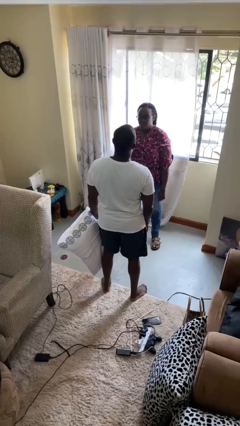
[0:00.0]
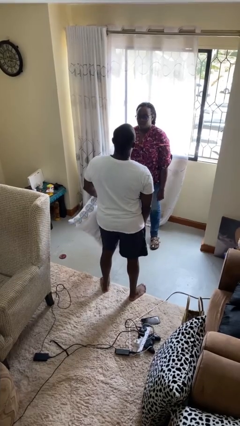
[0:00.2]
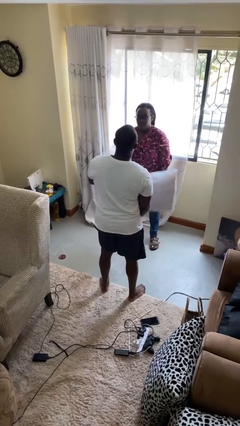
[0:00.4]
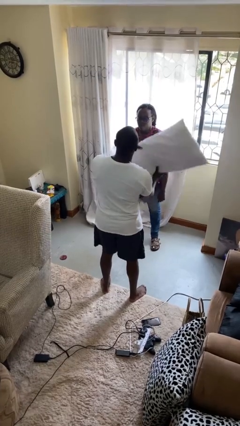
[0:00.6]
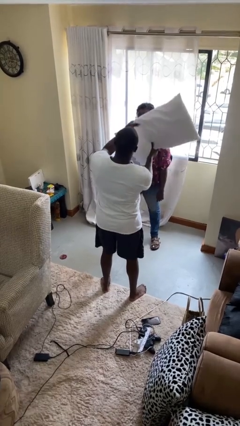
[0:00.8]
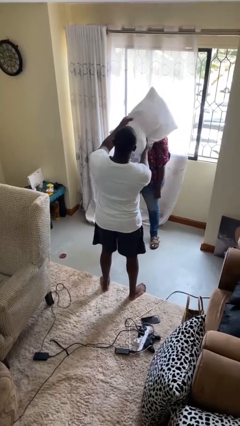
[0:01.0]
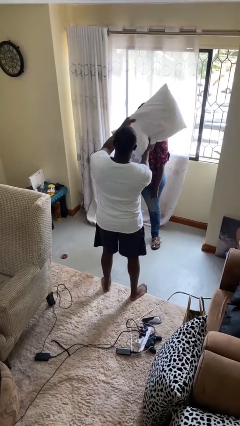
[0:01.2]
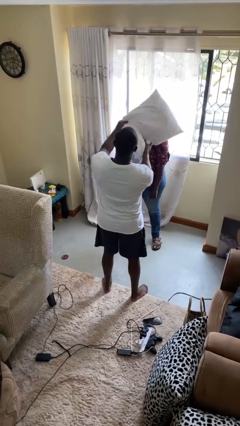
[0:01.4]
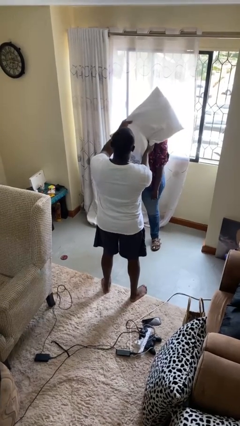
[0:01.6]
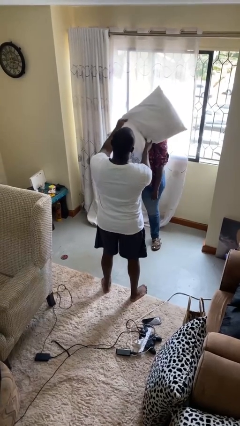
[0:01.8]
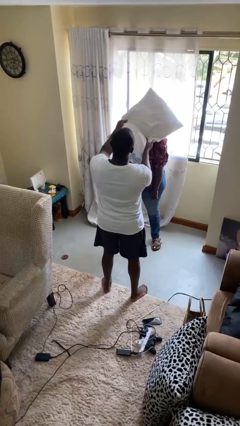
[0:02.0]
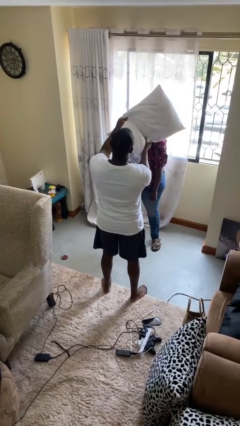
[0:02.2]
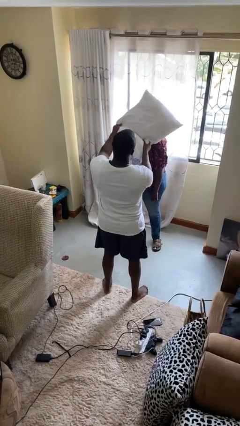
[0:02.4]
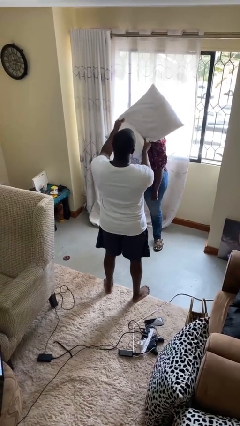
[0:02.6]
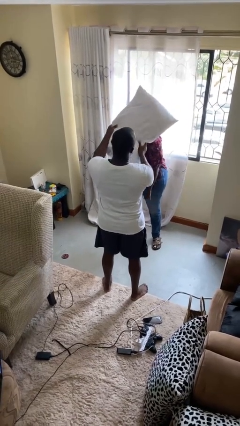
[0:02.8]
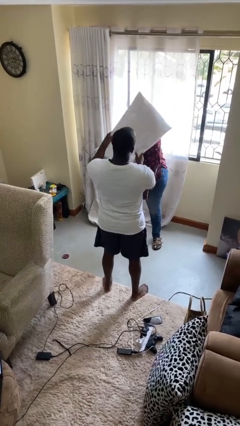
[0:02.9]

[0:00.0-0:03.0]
person hits person with pillow

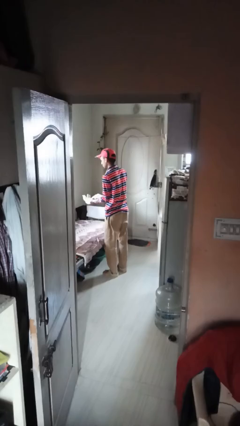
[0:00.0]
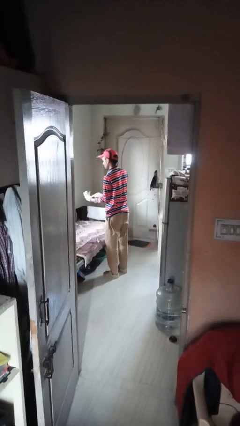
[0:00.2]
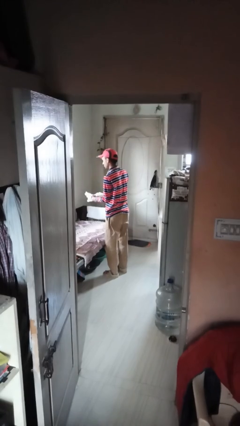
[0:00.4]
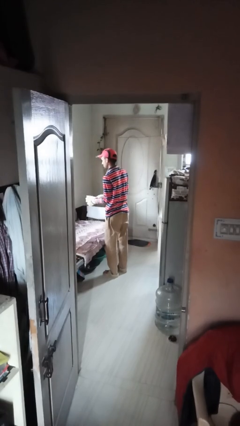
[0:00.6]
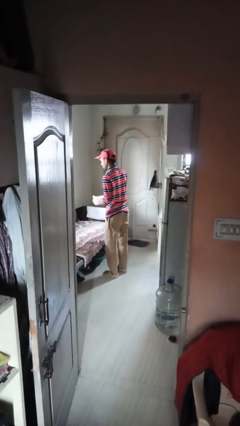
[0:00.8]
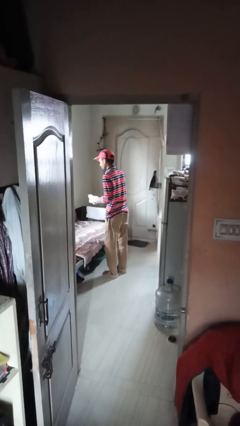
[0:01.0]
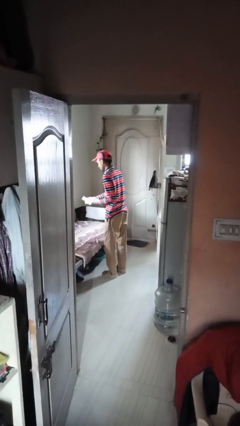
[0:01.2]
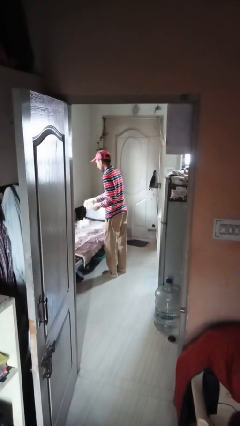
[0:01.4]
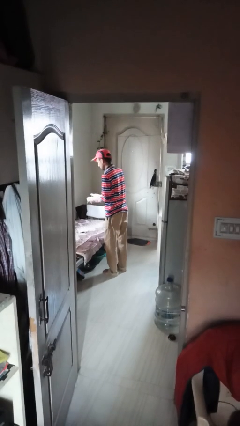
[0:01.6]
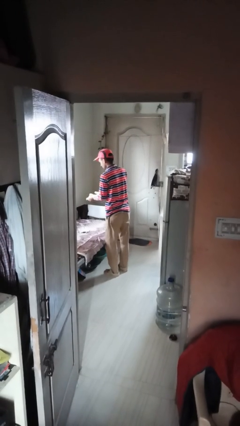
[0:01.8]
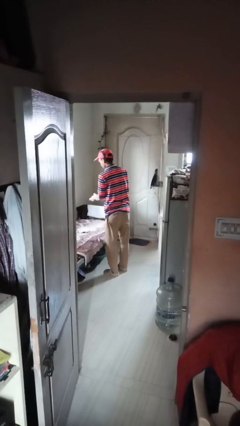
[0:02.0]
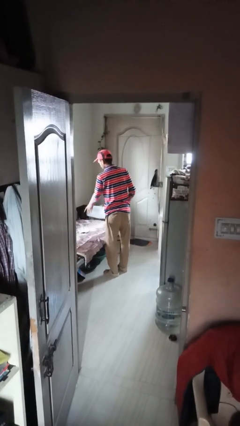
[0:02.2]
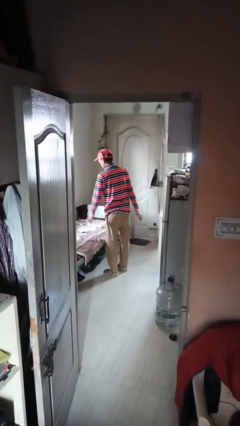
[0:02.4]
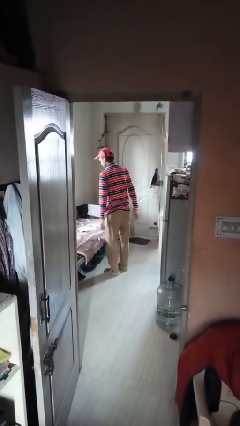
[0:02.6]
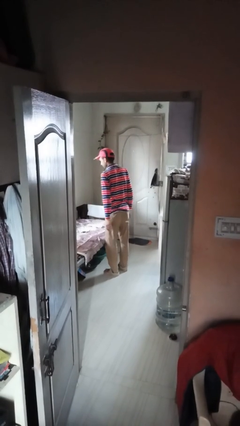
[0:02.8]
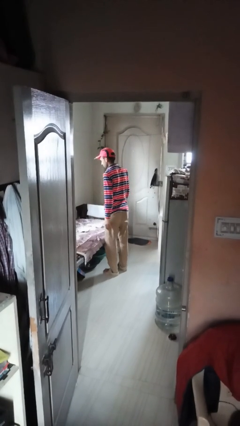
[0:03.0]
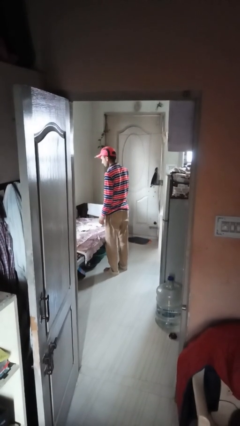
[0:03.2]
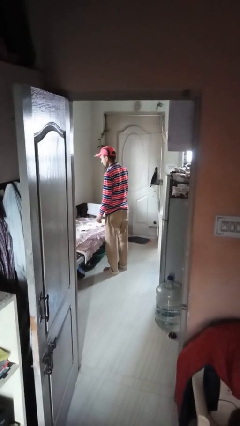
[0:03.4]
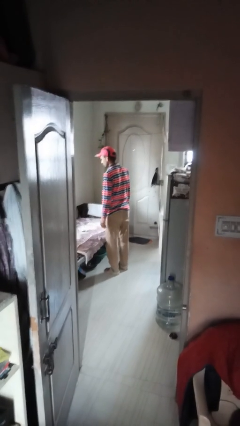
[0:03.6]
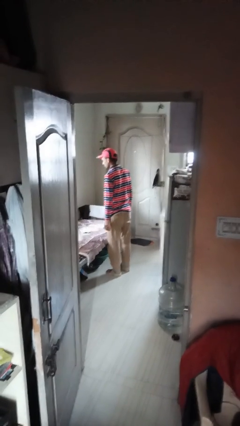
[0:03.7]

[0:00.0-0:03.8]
person takes off gloves

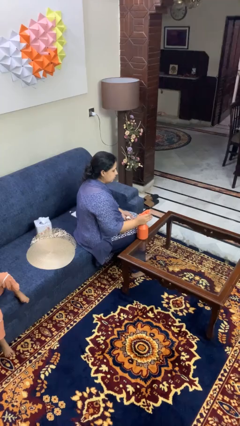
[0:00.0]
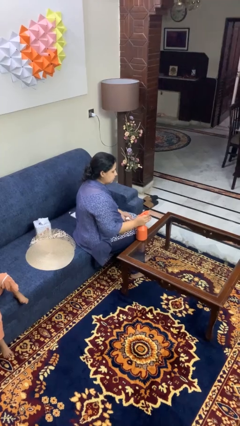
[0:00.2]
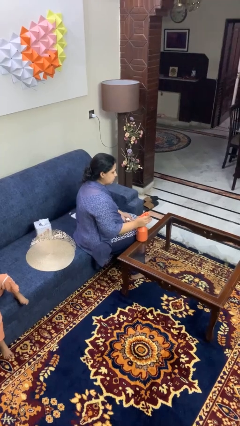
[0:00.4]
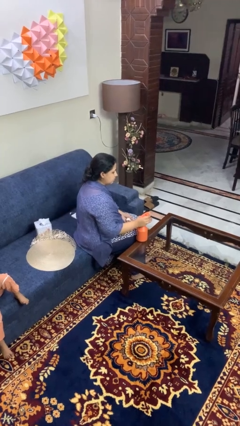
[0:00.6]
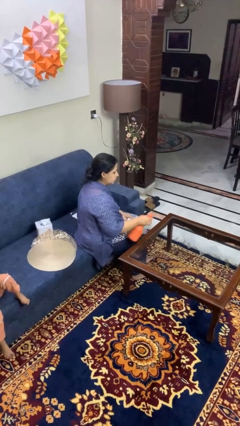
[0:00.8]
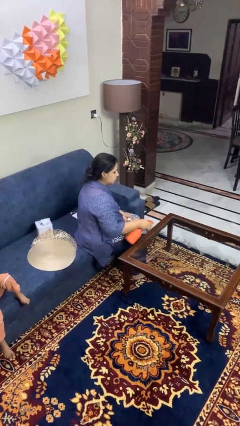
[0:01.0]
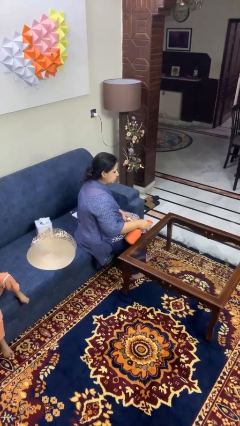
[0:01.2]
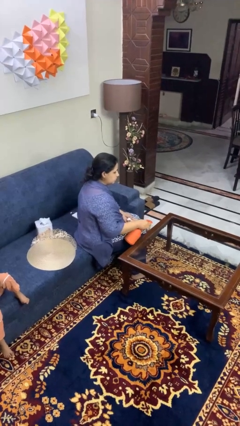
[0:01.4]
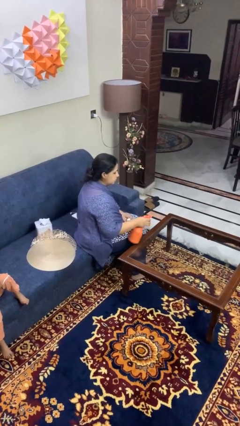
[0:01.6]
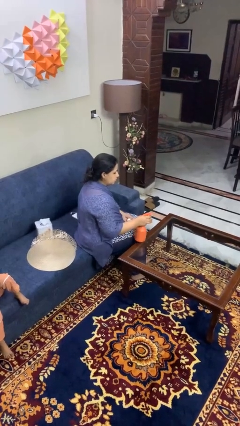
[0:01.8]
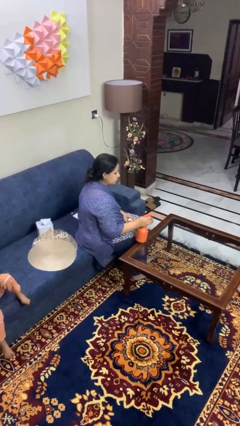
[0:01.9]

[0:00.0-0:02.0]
person sprays from bottle

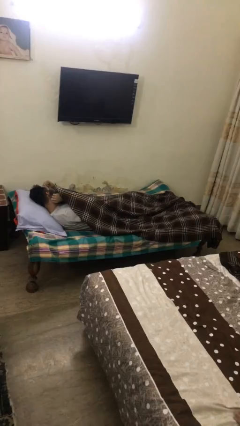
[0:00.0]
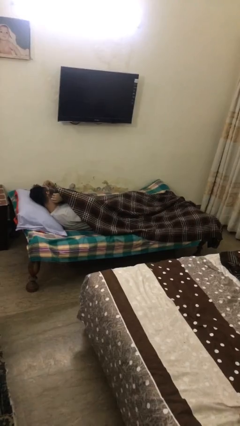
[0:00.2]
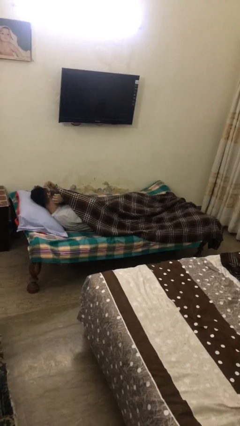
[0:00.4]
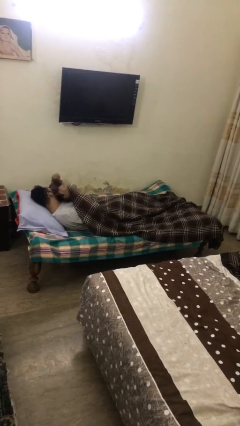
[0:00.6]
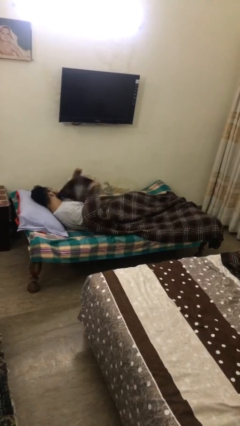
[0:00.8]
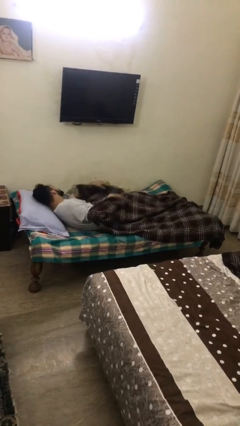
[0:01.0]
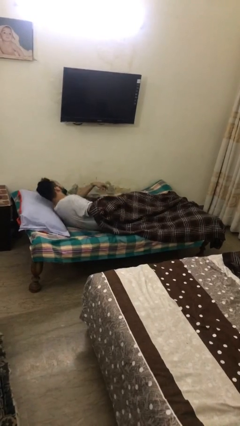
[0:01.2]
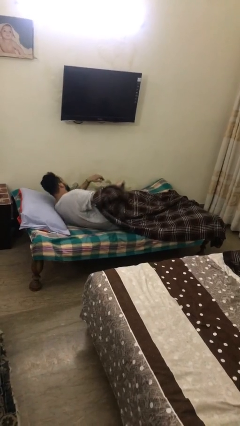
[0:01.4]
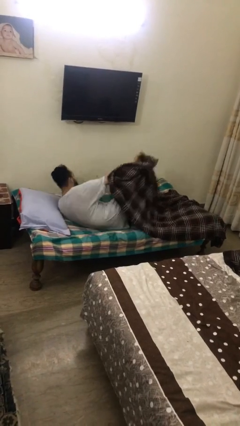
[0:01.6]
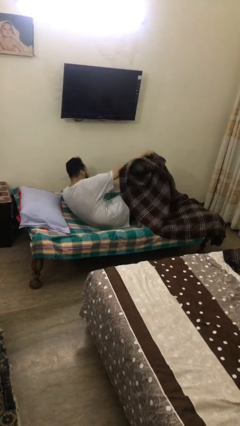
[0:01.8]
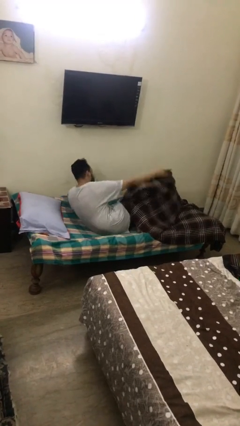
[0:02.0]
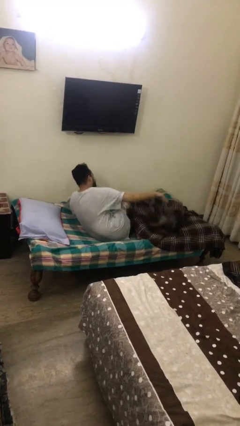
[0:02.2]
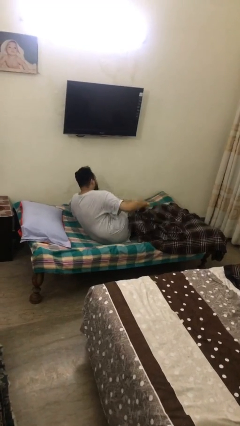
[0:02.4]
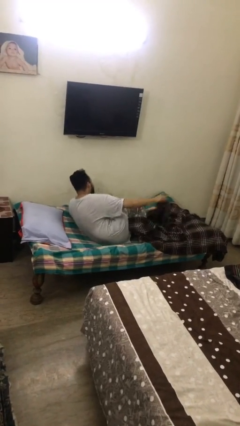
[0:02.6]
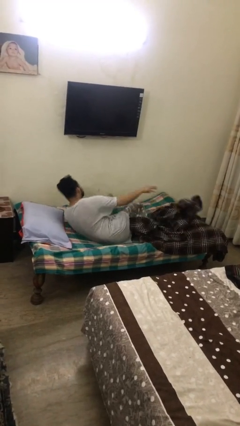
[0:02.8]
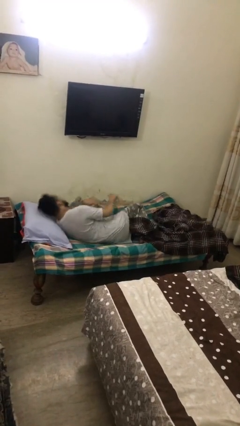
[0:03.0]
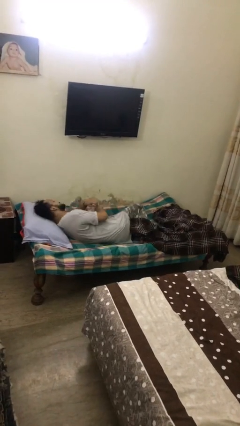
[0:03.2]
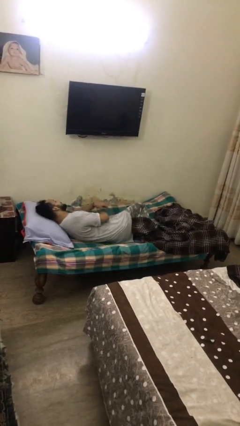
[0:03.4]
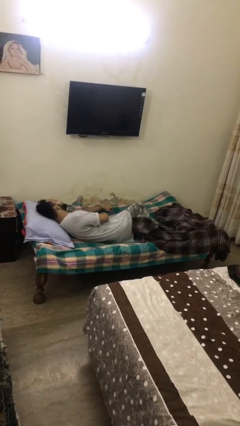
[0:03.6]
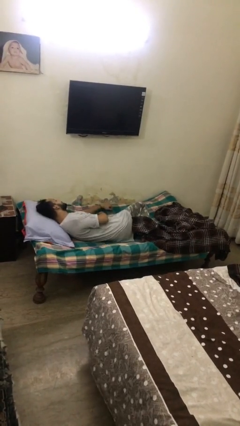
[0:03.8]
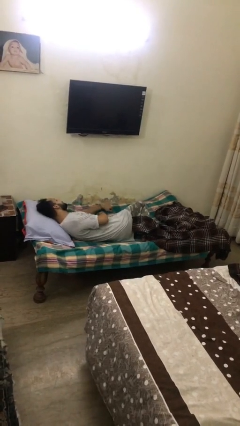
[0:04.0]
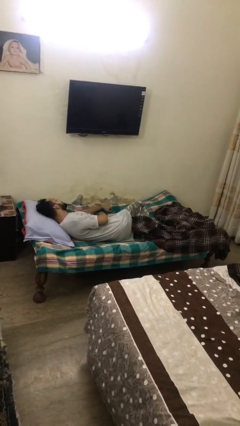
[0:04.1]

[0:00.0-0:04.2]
person uncovers with blanket

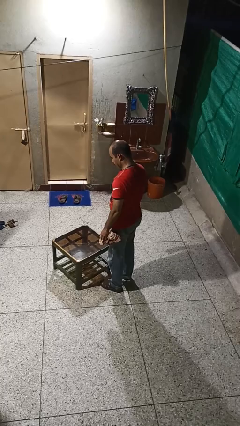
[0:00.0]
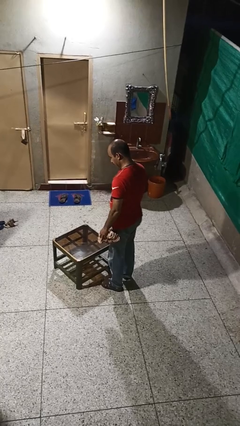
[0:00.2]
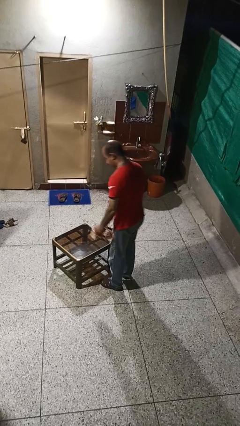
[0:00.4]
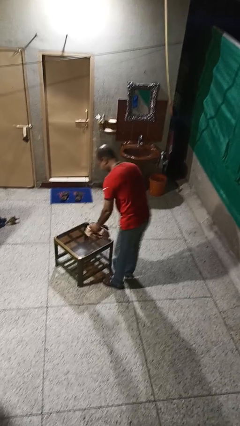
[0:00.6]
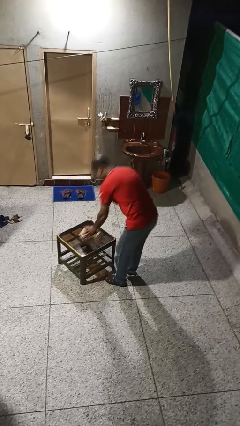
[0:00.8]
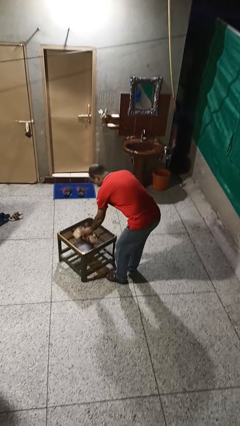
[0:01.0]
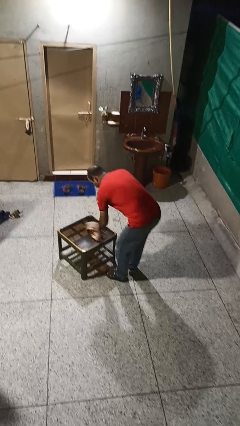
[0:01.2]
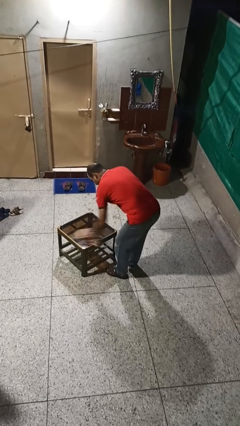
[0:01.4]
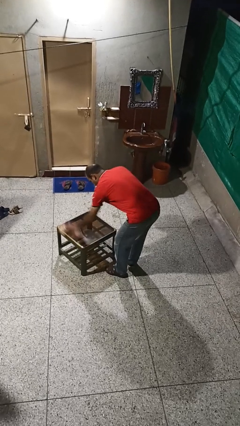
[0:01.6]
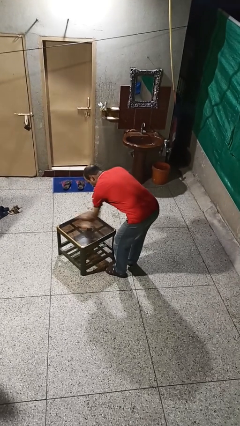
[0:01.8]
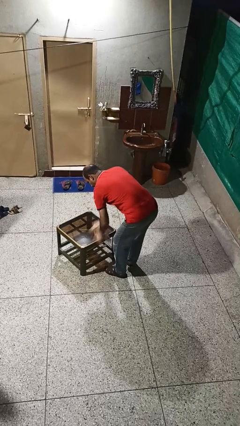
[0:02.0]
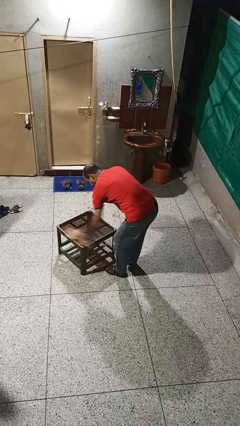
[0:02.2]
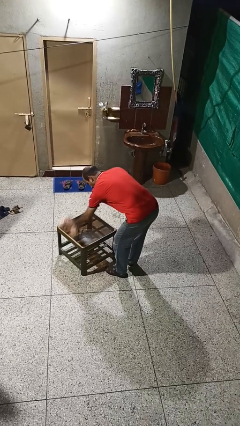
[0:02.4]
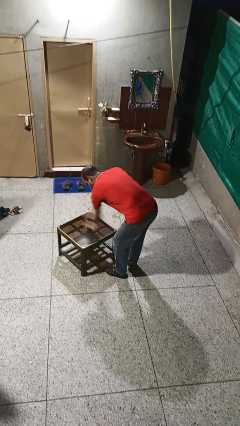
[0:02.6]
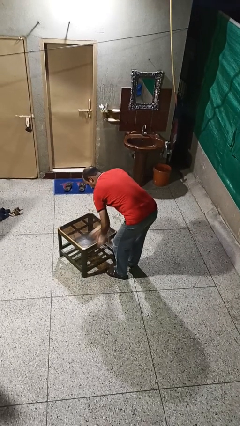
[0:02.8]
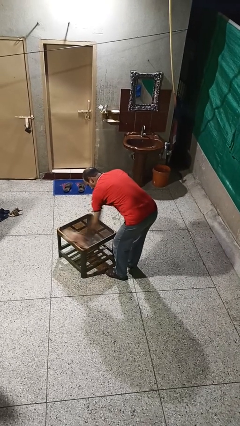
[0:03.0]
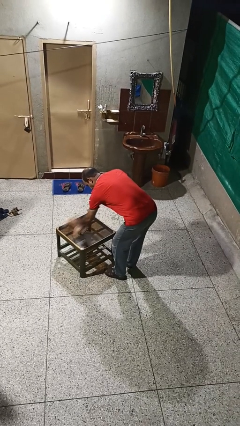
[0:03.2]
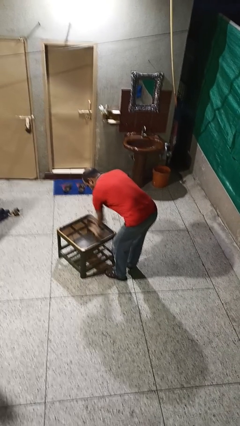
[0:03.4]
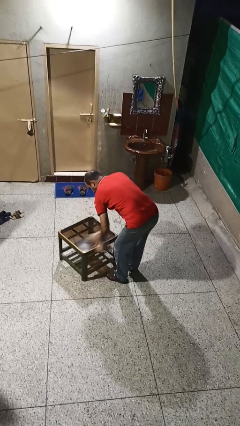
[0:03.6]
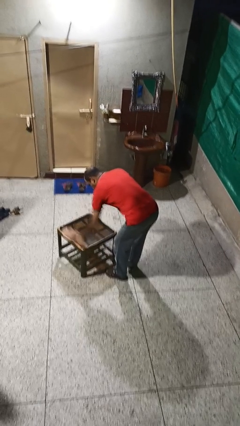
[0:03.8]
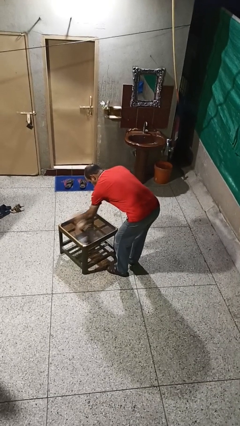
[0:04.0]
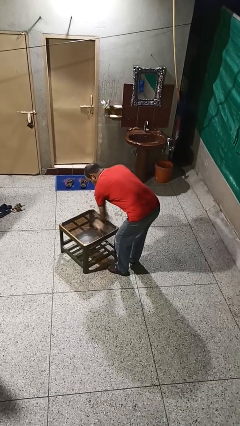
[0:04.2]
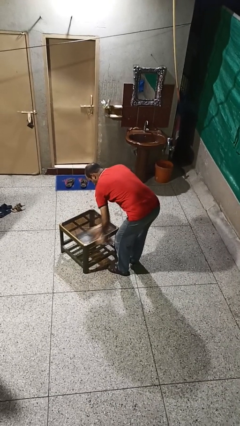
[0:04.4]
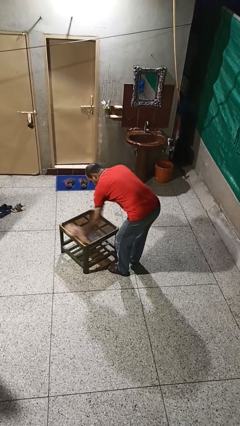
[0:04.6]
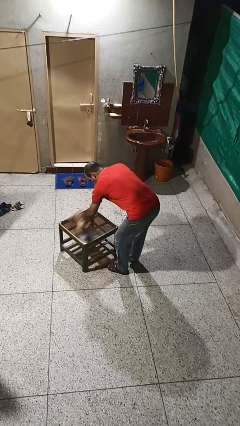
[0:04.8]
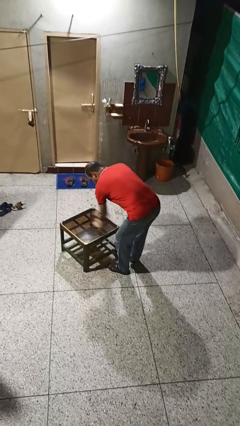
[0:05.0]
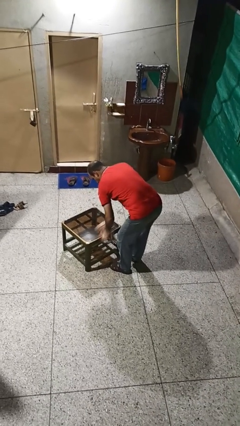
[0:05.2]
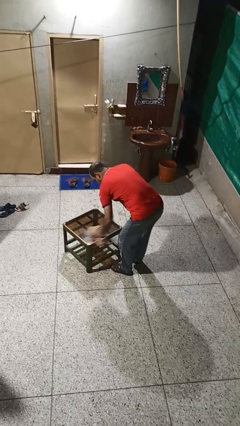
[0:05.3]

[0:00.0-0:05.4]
person cleans table with rag
